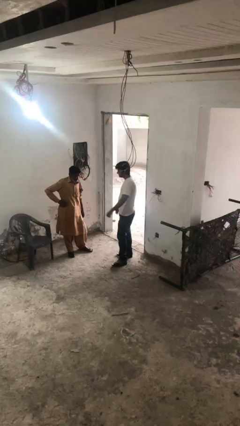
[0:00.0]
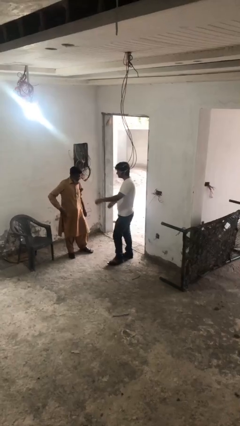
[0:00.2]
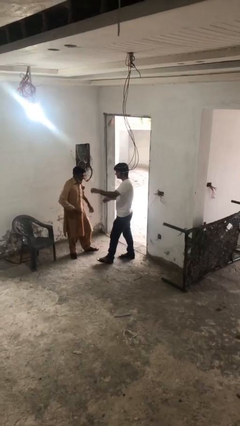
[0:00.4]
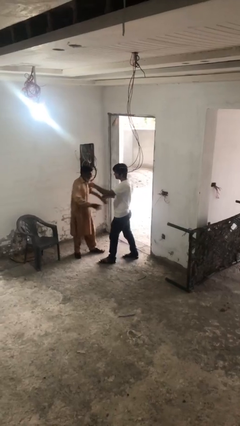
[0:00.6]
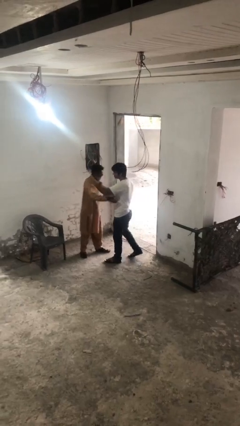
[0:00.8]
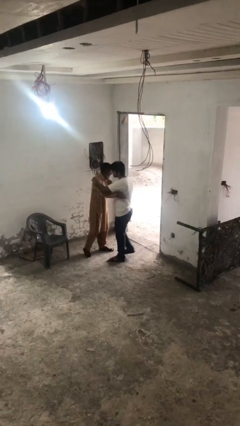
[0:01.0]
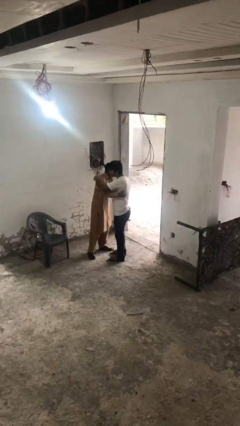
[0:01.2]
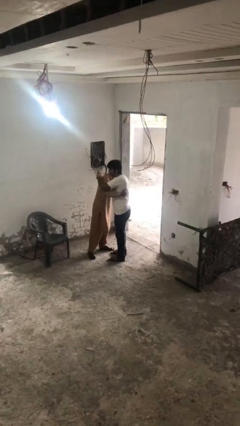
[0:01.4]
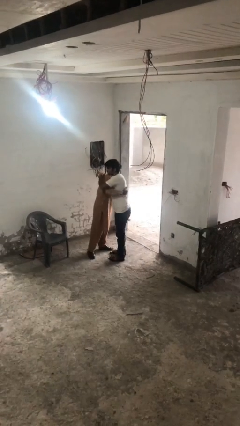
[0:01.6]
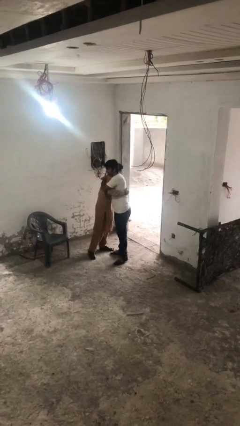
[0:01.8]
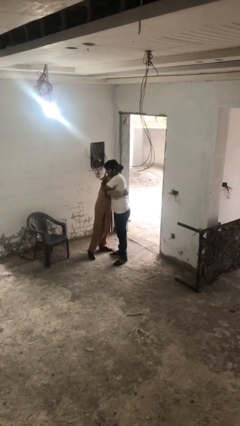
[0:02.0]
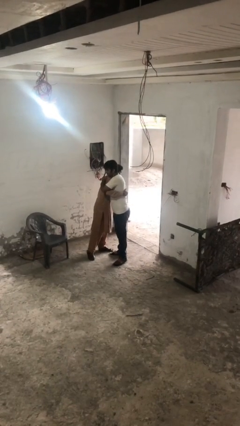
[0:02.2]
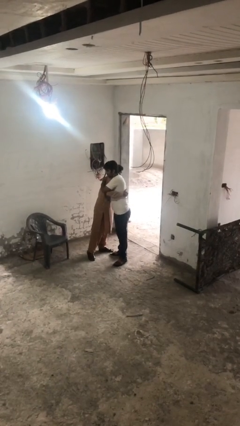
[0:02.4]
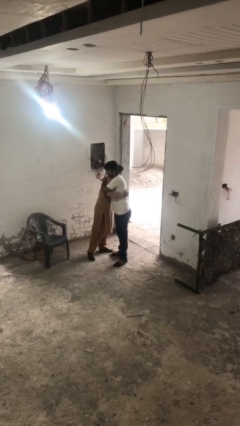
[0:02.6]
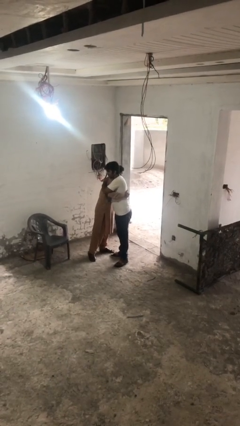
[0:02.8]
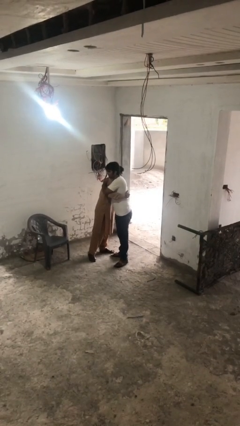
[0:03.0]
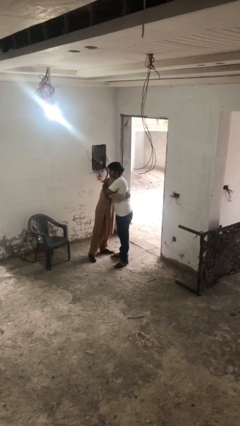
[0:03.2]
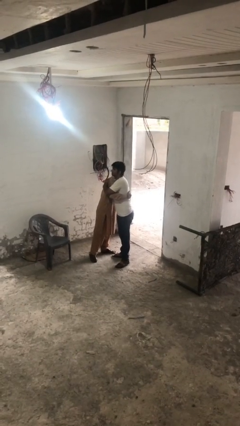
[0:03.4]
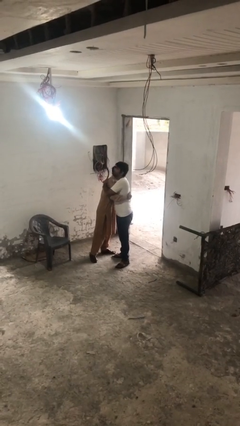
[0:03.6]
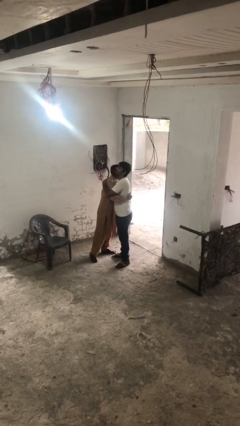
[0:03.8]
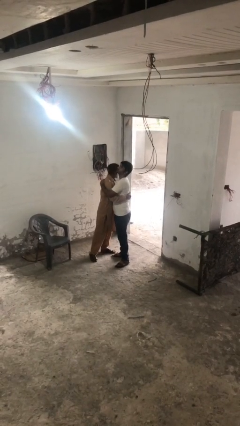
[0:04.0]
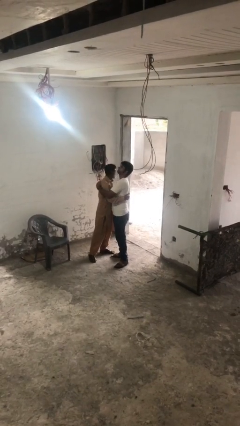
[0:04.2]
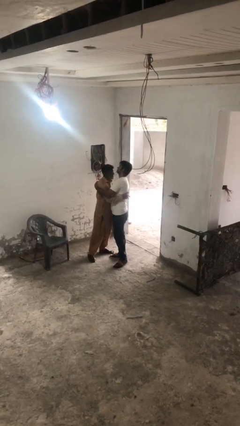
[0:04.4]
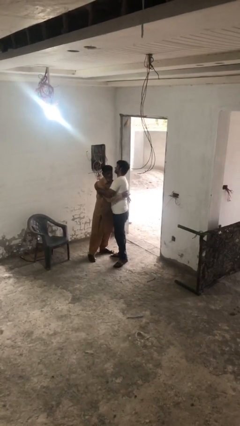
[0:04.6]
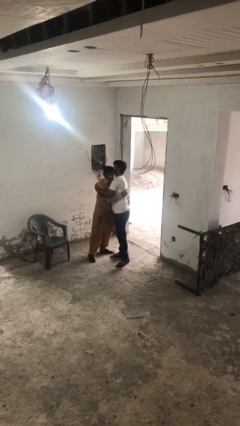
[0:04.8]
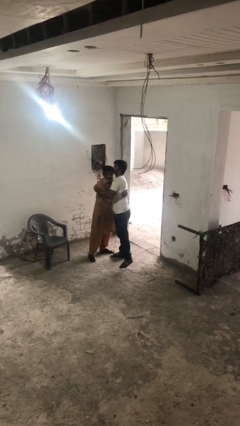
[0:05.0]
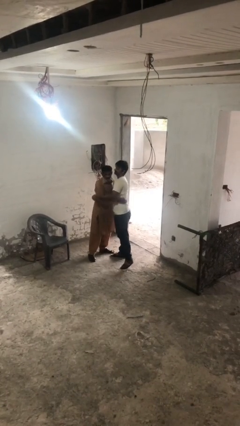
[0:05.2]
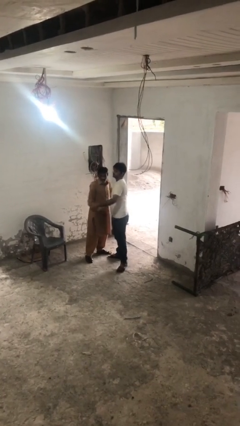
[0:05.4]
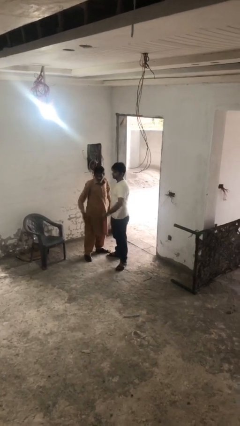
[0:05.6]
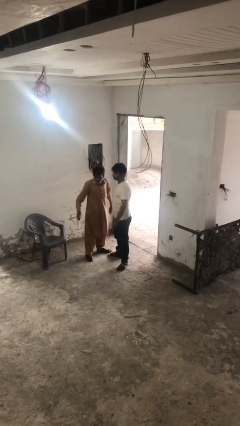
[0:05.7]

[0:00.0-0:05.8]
person embraces person

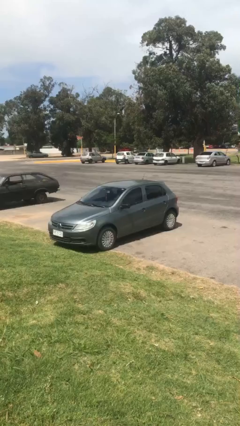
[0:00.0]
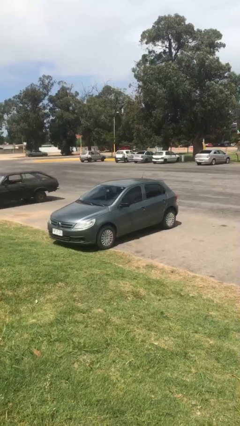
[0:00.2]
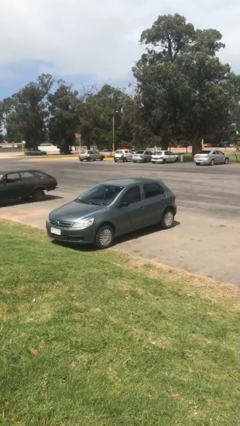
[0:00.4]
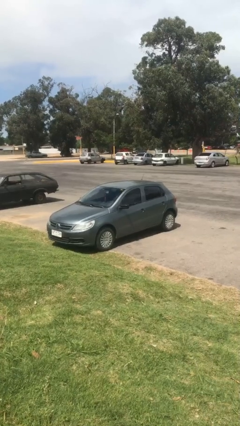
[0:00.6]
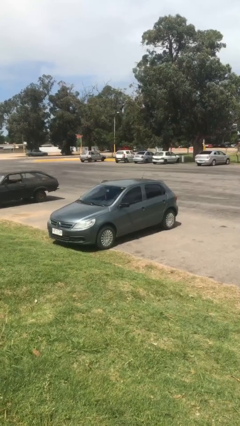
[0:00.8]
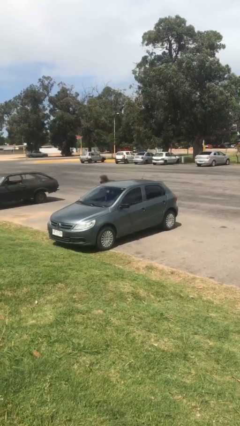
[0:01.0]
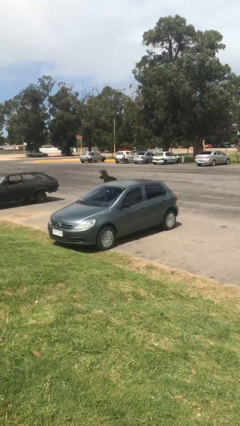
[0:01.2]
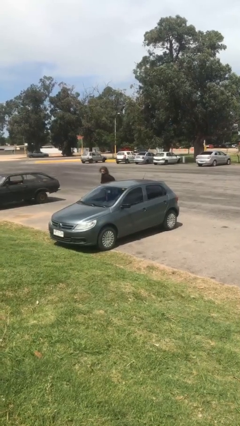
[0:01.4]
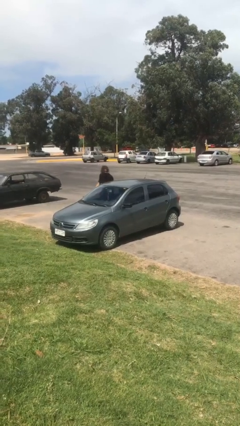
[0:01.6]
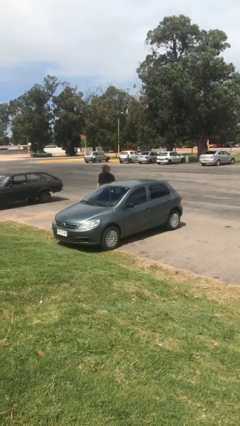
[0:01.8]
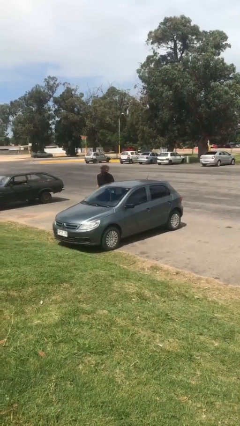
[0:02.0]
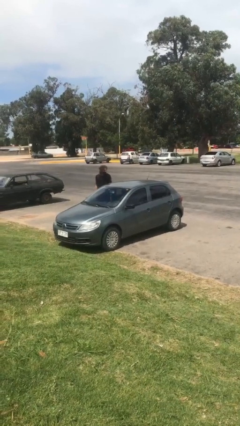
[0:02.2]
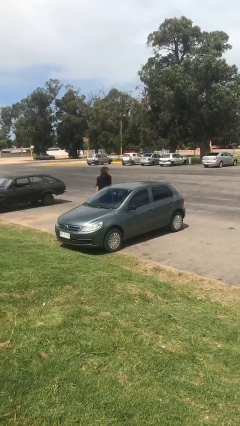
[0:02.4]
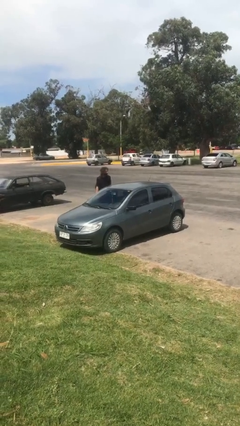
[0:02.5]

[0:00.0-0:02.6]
car drops off person

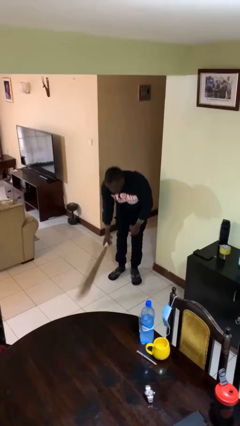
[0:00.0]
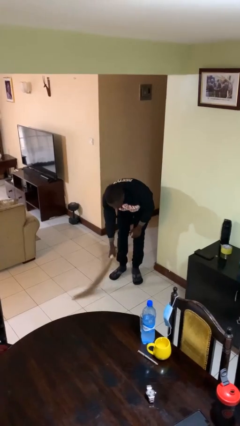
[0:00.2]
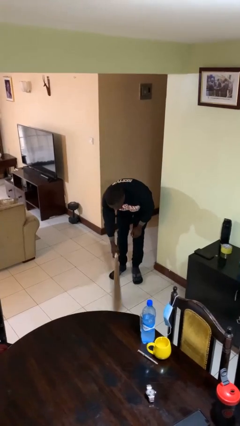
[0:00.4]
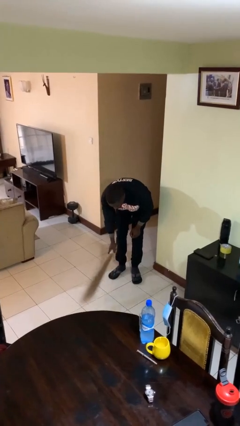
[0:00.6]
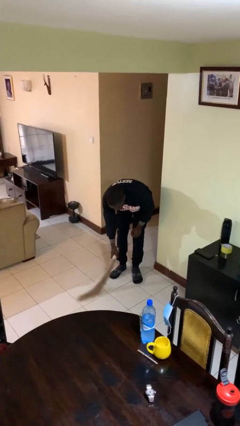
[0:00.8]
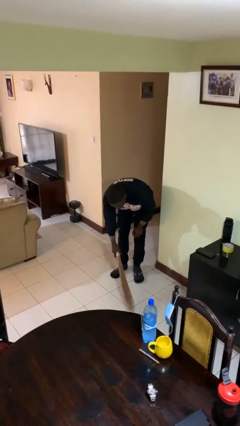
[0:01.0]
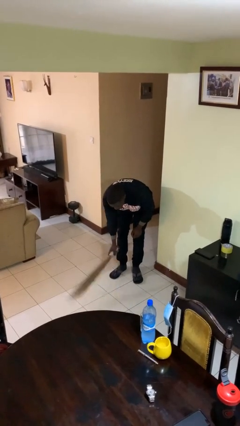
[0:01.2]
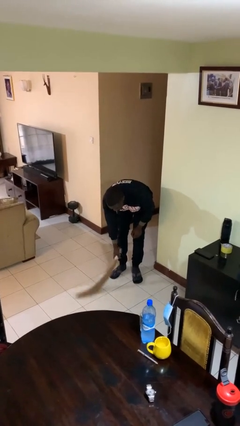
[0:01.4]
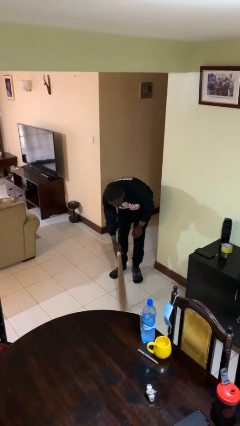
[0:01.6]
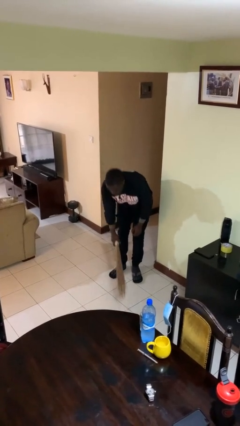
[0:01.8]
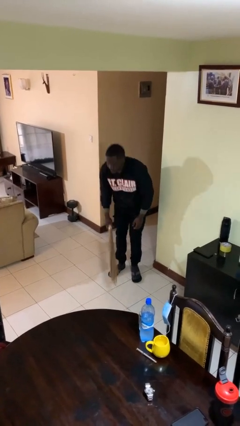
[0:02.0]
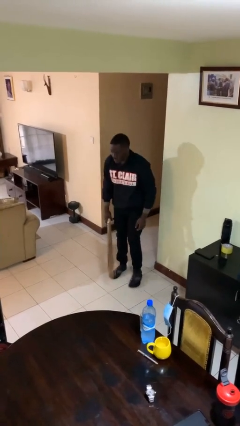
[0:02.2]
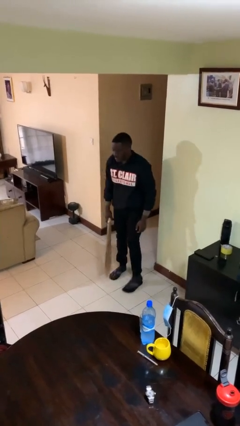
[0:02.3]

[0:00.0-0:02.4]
person sweeps floor

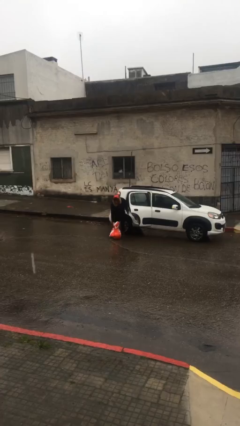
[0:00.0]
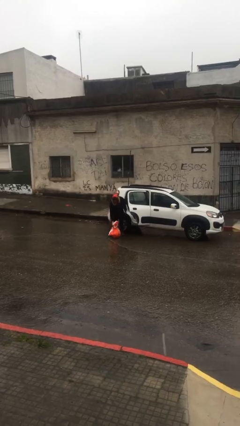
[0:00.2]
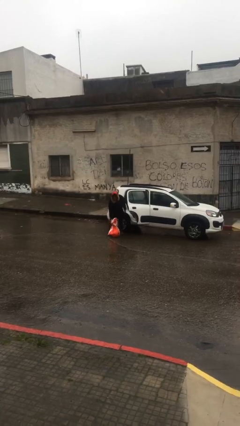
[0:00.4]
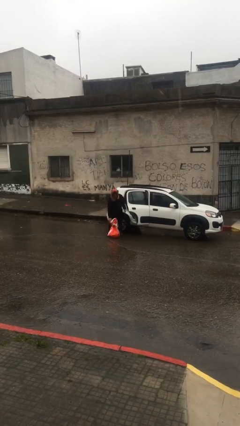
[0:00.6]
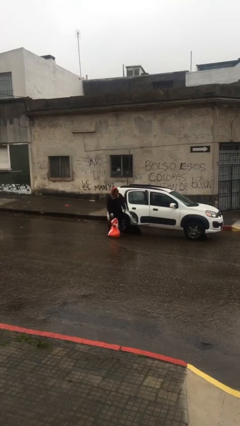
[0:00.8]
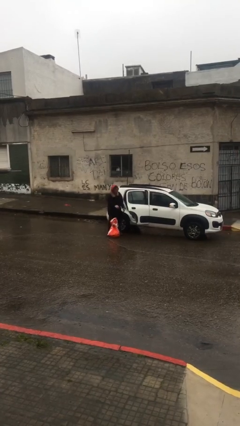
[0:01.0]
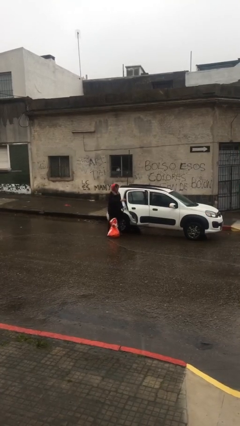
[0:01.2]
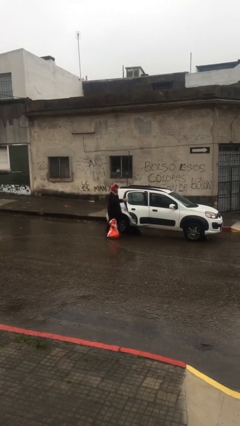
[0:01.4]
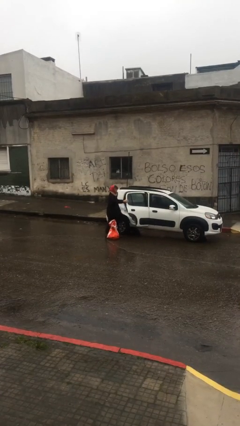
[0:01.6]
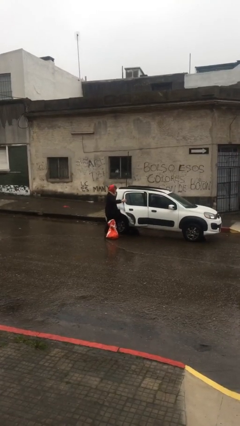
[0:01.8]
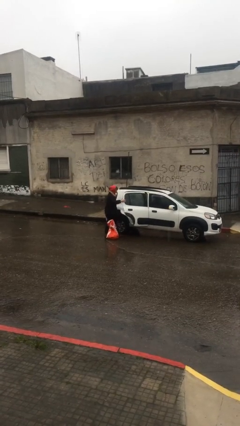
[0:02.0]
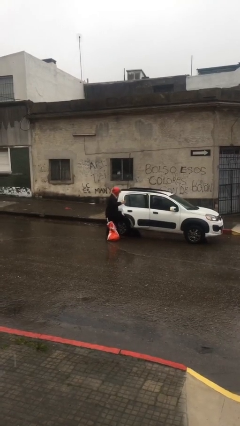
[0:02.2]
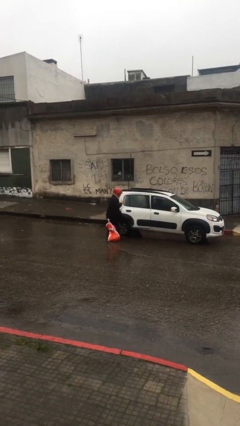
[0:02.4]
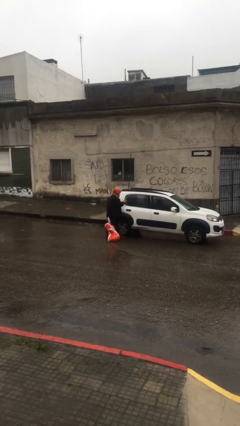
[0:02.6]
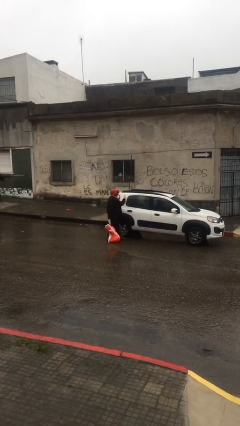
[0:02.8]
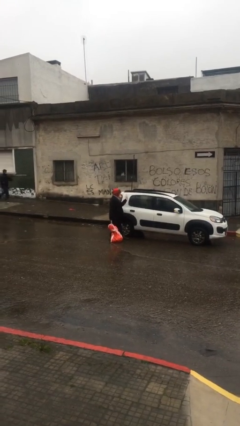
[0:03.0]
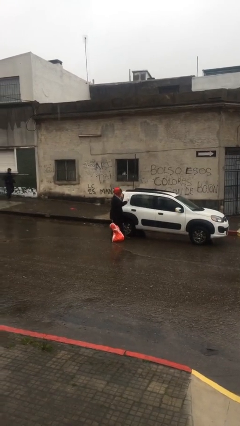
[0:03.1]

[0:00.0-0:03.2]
person closes car door

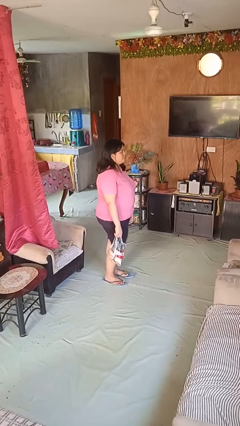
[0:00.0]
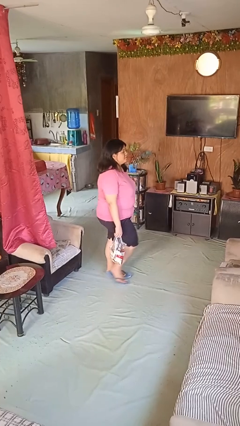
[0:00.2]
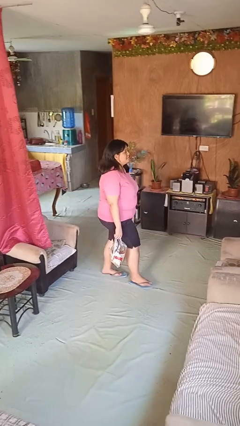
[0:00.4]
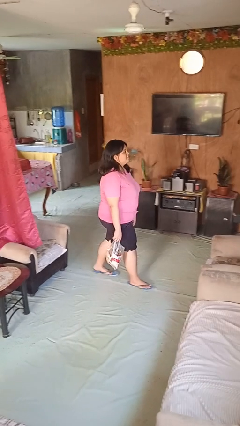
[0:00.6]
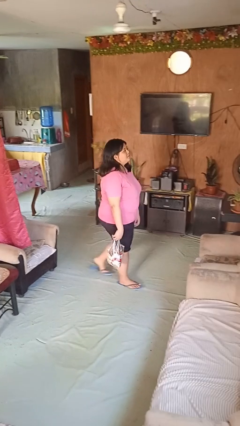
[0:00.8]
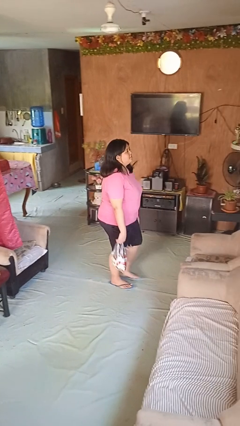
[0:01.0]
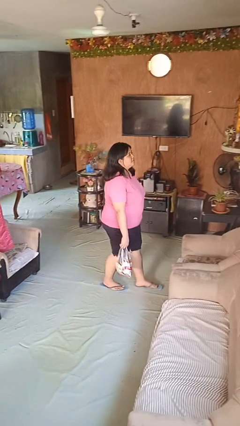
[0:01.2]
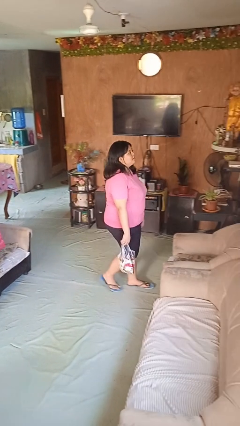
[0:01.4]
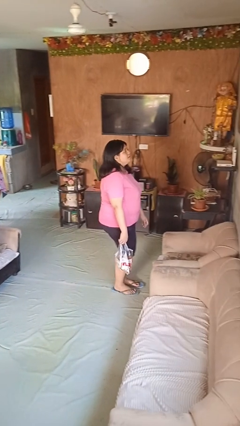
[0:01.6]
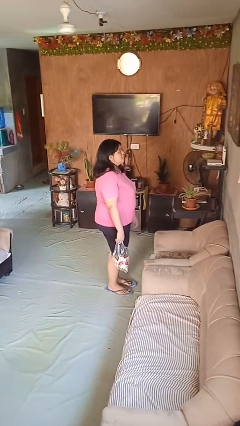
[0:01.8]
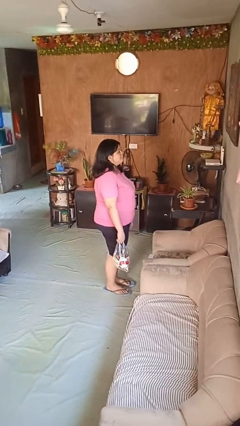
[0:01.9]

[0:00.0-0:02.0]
person carries groceries

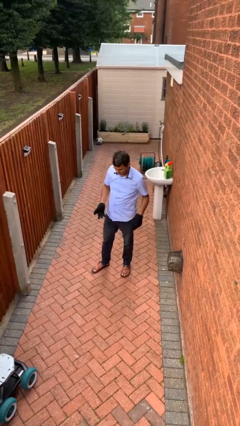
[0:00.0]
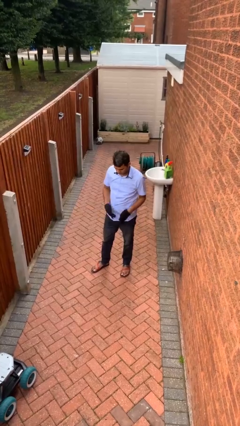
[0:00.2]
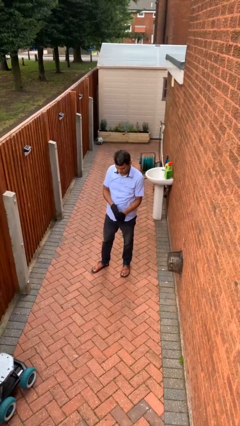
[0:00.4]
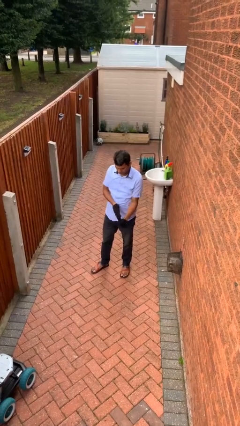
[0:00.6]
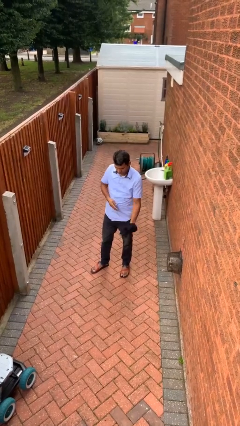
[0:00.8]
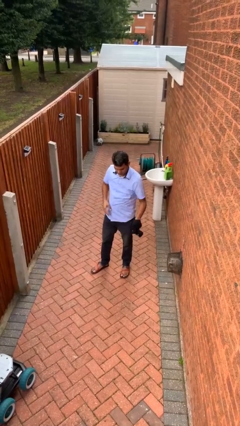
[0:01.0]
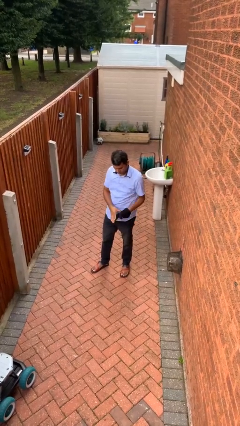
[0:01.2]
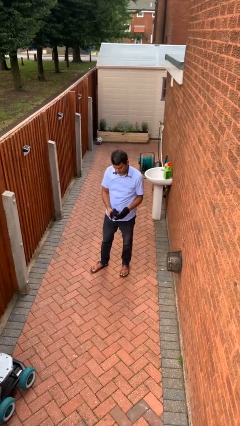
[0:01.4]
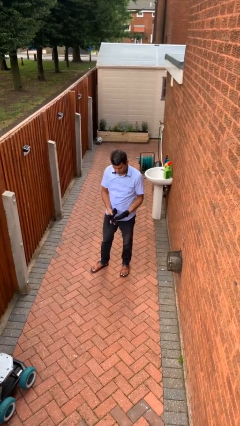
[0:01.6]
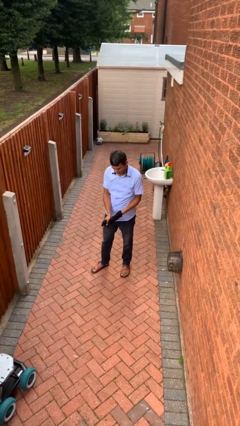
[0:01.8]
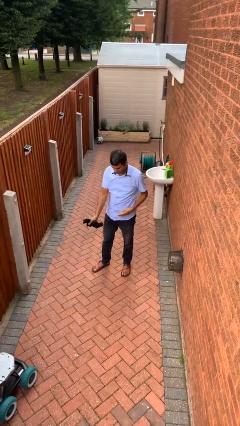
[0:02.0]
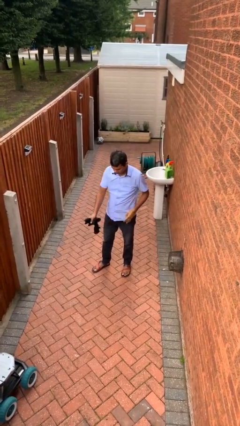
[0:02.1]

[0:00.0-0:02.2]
person takes off gloves
